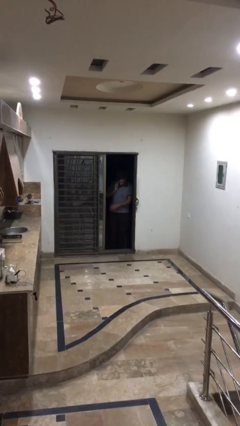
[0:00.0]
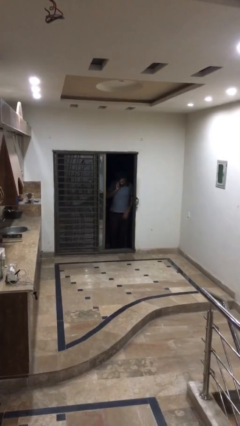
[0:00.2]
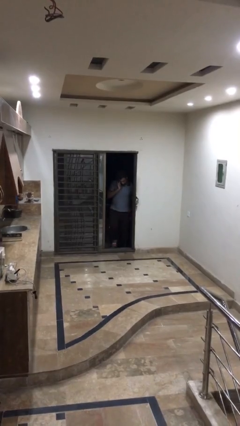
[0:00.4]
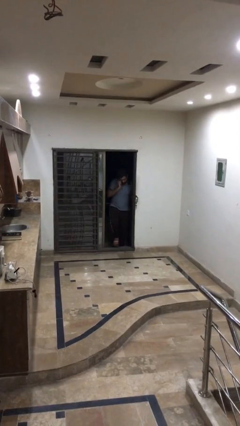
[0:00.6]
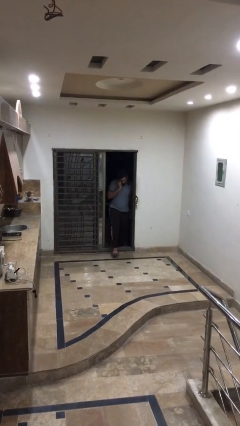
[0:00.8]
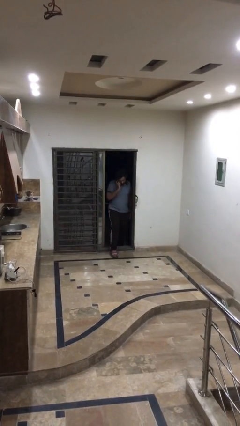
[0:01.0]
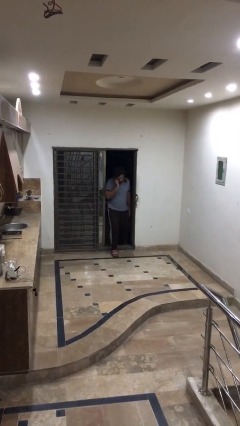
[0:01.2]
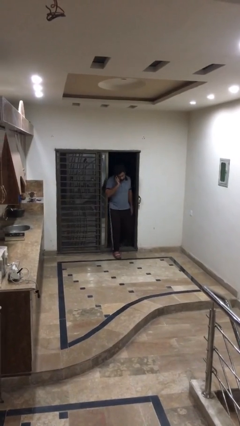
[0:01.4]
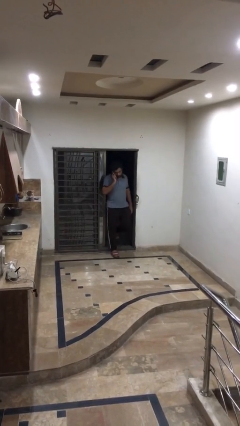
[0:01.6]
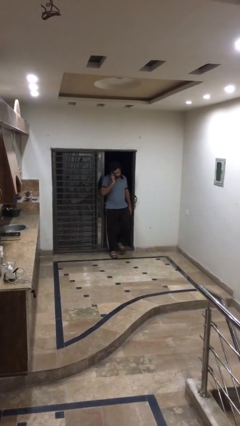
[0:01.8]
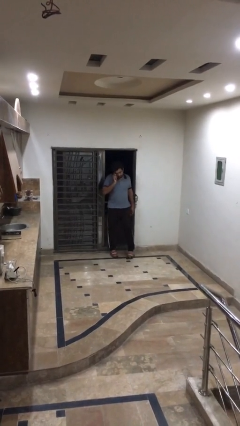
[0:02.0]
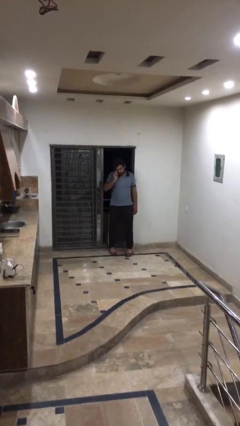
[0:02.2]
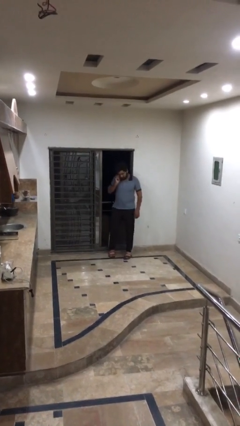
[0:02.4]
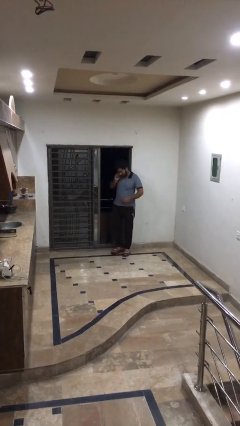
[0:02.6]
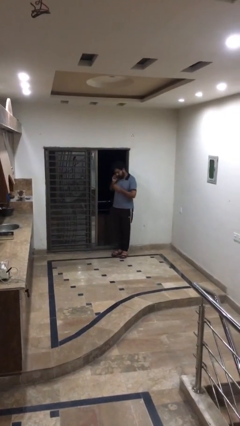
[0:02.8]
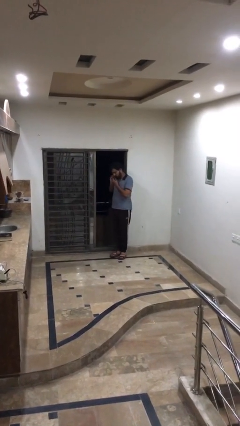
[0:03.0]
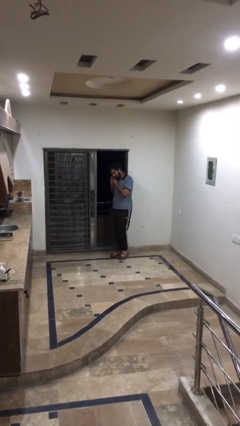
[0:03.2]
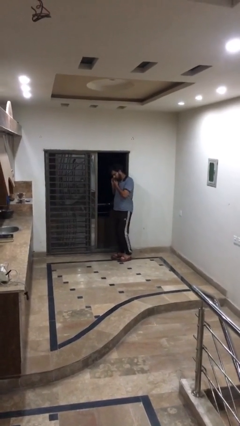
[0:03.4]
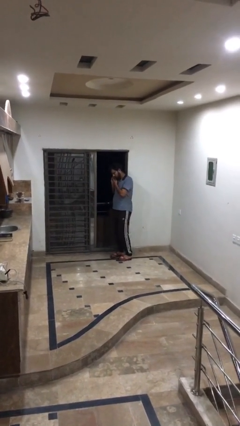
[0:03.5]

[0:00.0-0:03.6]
person enters scene through structure

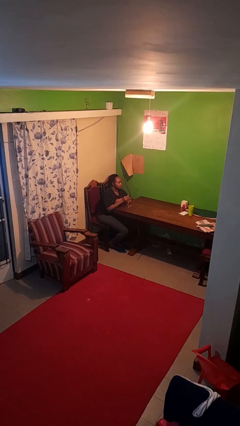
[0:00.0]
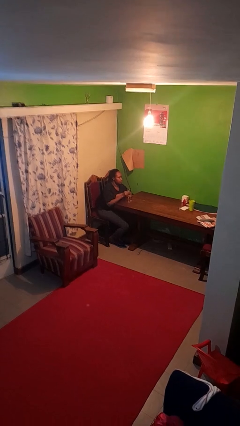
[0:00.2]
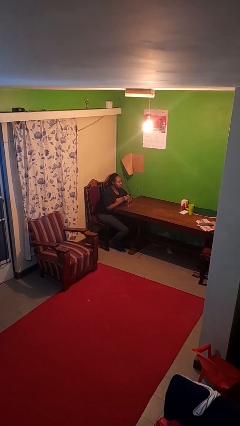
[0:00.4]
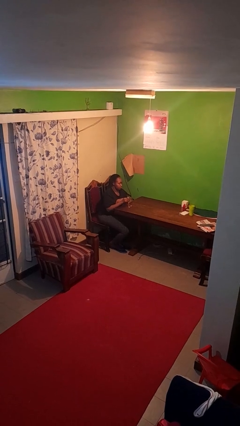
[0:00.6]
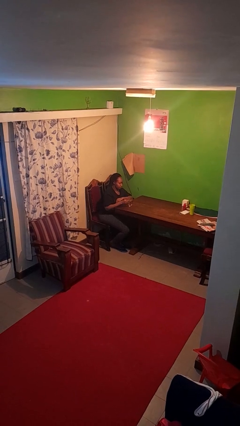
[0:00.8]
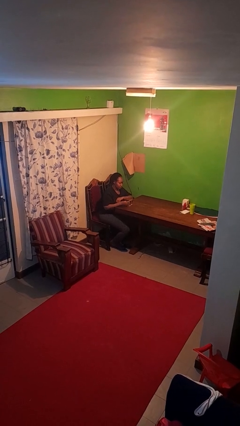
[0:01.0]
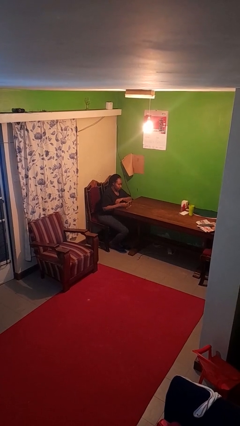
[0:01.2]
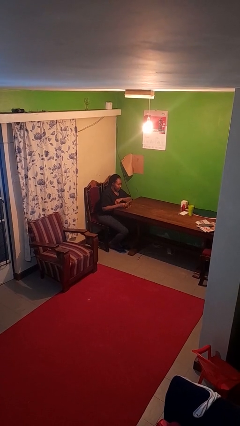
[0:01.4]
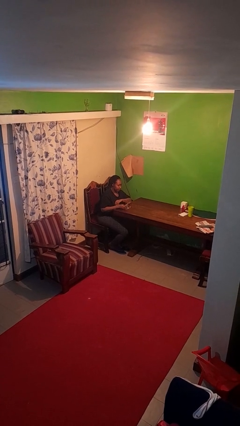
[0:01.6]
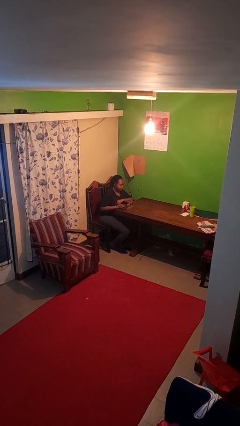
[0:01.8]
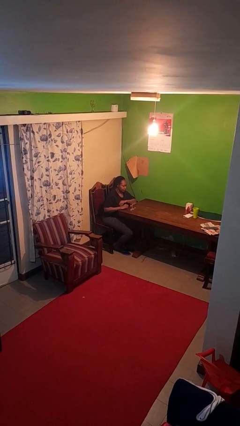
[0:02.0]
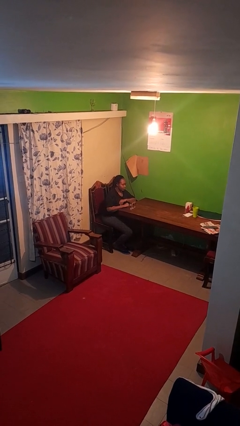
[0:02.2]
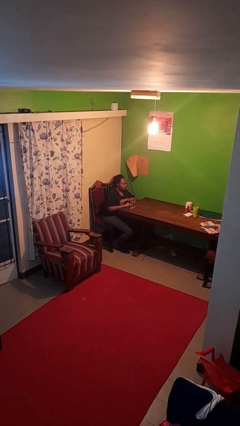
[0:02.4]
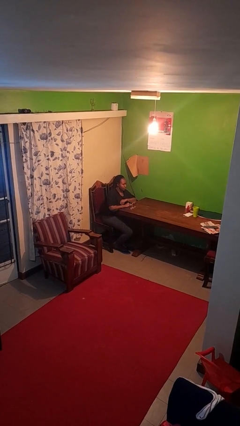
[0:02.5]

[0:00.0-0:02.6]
person puts down object on table

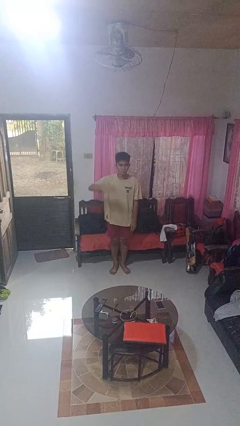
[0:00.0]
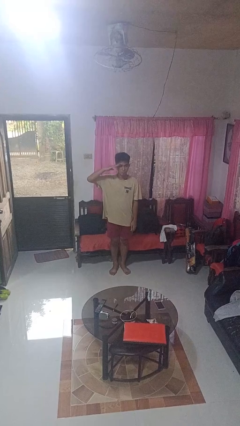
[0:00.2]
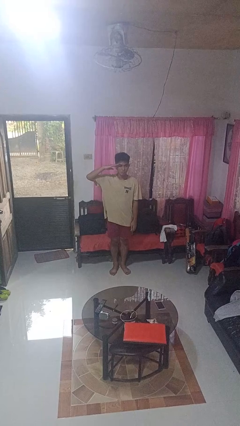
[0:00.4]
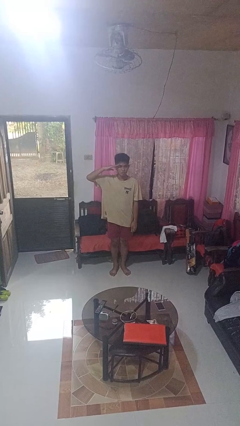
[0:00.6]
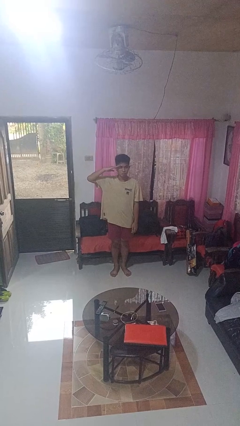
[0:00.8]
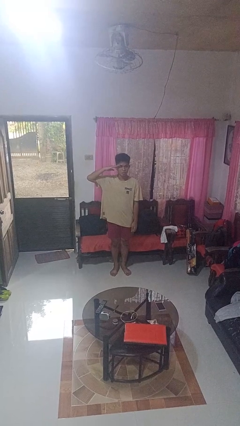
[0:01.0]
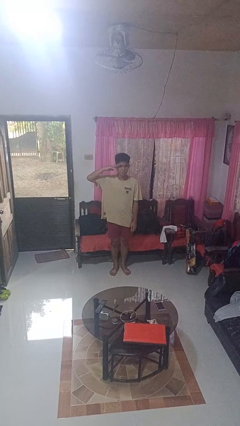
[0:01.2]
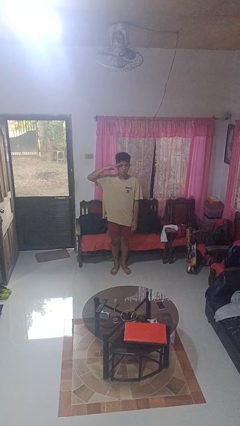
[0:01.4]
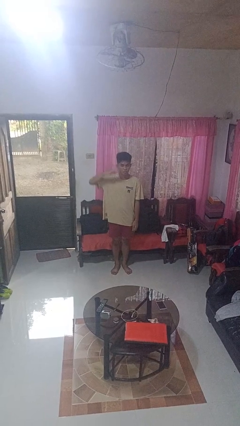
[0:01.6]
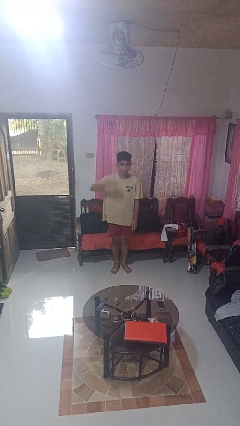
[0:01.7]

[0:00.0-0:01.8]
person salutes

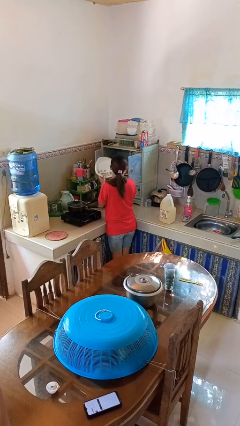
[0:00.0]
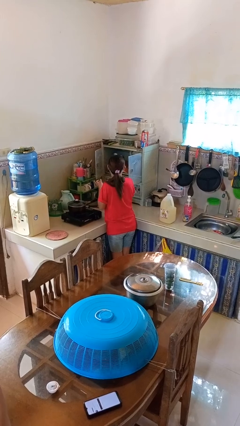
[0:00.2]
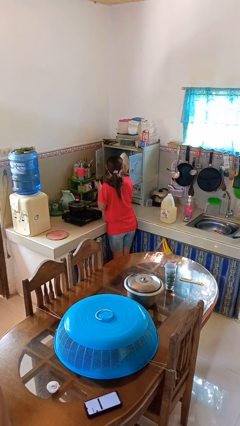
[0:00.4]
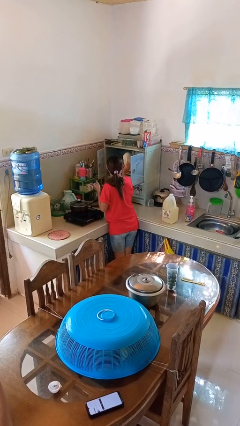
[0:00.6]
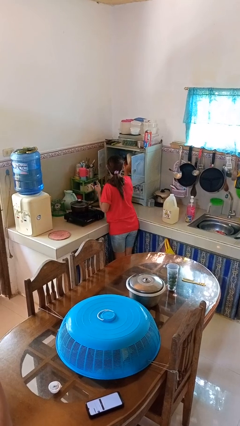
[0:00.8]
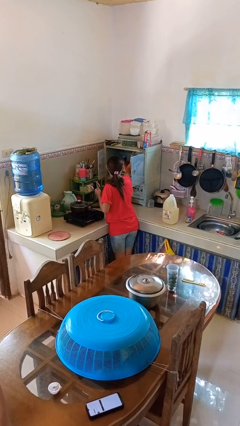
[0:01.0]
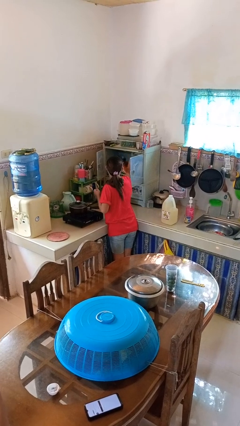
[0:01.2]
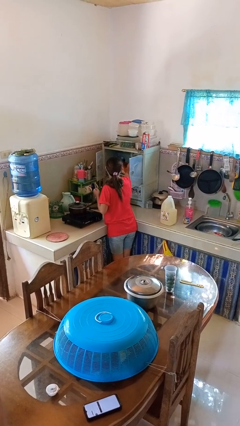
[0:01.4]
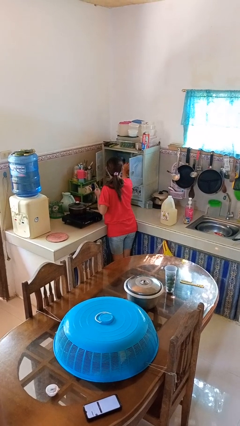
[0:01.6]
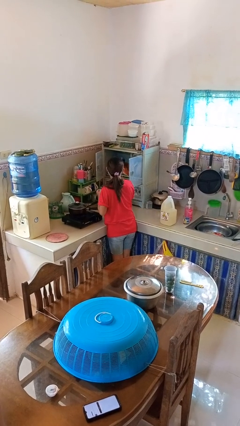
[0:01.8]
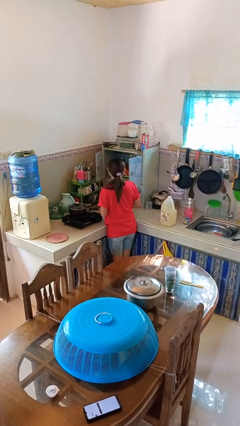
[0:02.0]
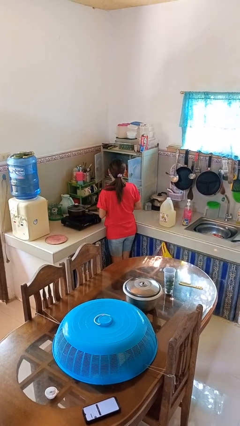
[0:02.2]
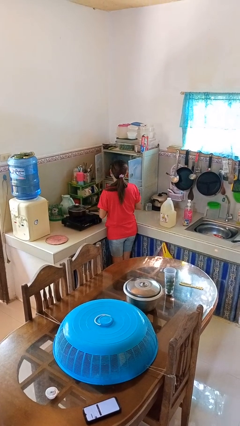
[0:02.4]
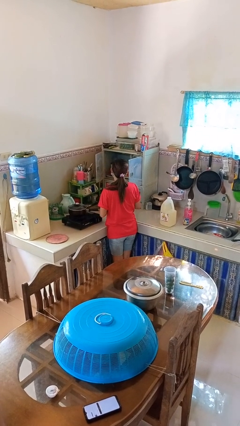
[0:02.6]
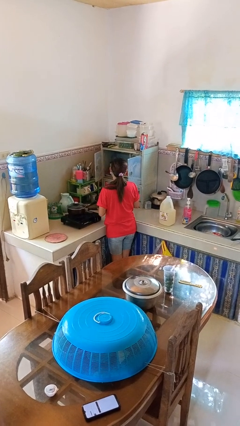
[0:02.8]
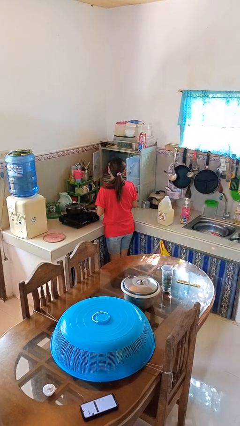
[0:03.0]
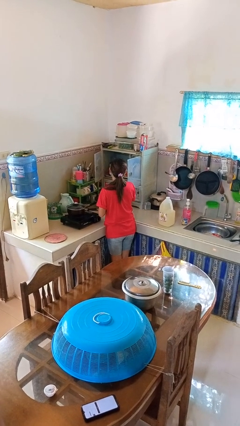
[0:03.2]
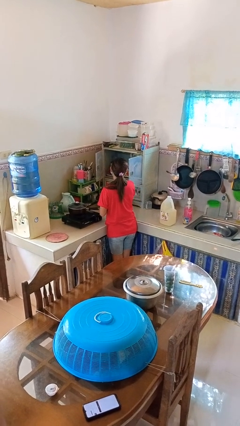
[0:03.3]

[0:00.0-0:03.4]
person puts object in cabinet

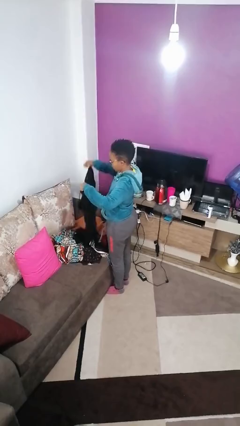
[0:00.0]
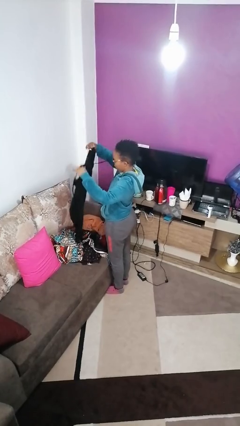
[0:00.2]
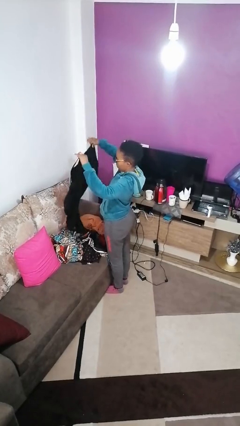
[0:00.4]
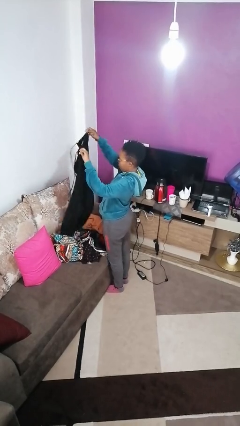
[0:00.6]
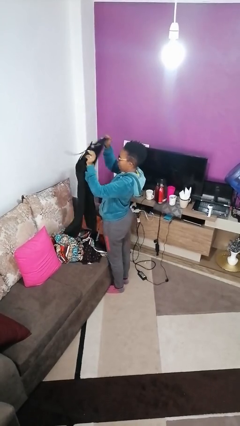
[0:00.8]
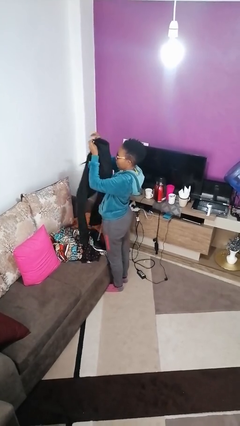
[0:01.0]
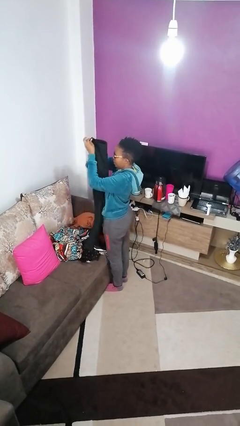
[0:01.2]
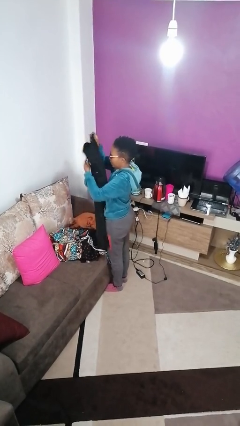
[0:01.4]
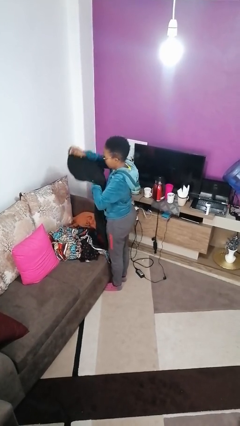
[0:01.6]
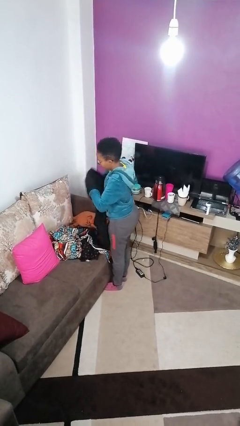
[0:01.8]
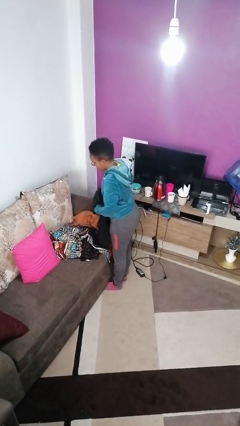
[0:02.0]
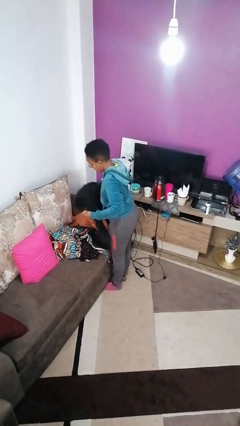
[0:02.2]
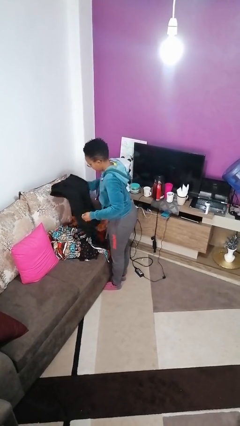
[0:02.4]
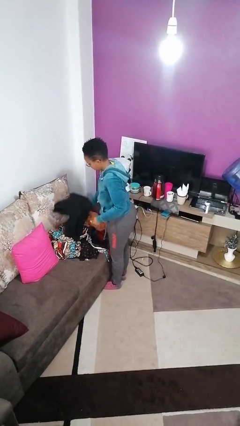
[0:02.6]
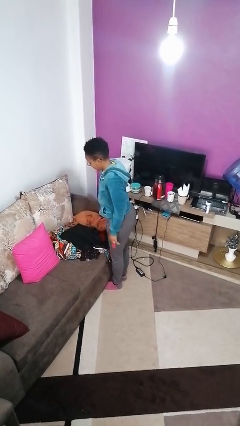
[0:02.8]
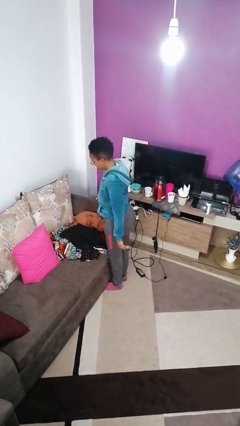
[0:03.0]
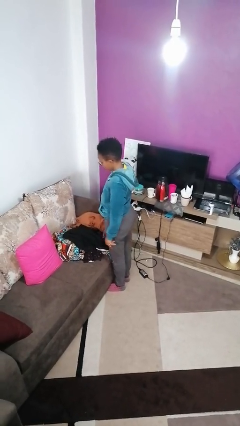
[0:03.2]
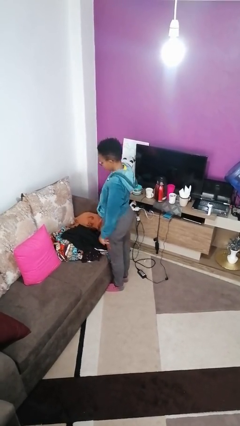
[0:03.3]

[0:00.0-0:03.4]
person folds pants

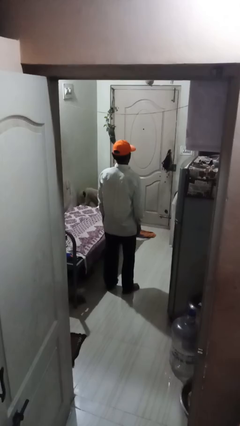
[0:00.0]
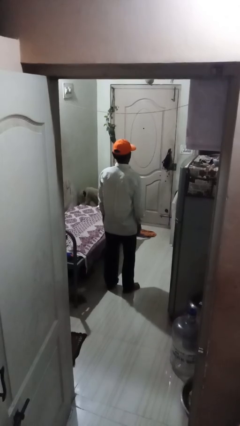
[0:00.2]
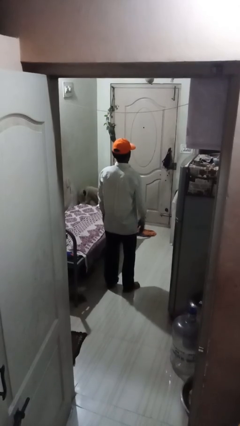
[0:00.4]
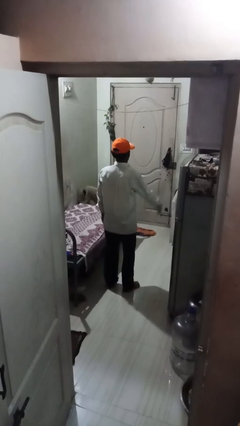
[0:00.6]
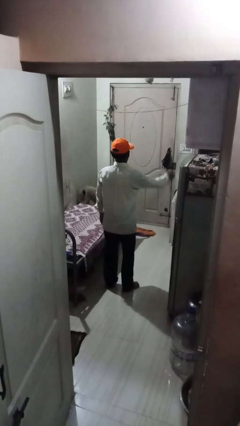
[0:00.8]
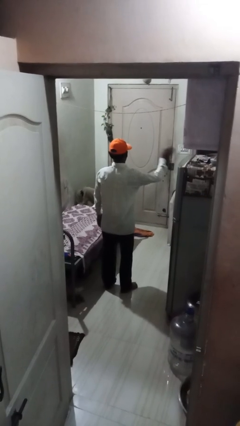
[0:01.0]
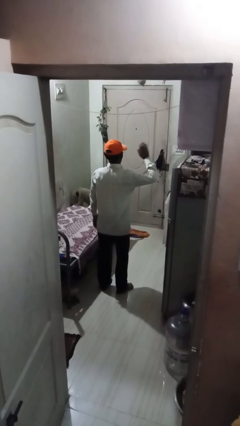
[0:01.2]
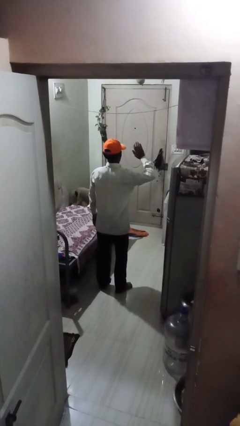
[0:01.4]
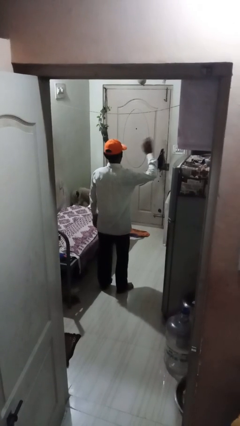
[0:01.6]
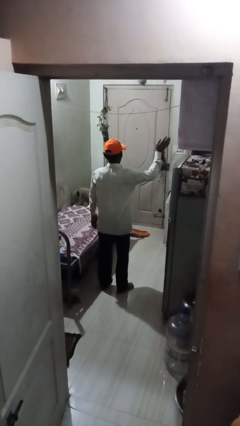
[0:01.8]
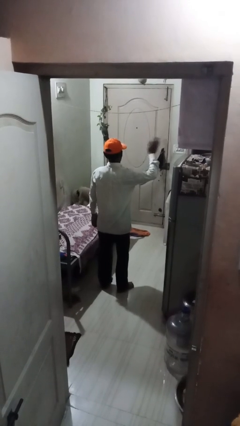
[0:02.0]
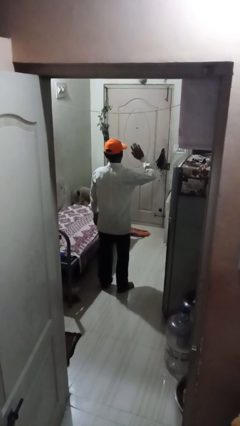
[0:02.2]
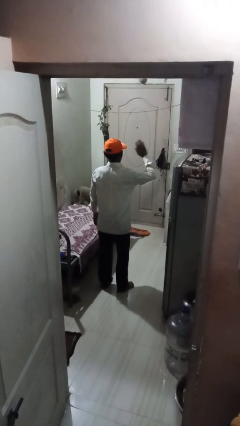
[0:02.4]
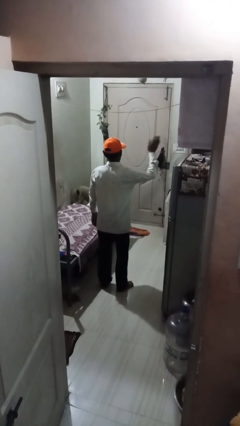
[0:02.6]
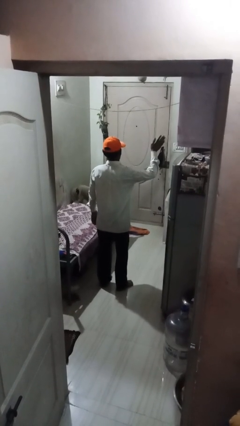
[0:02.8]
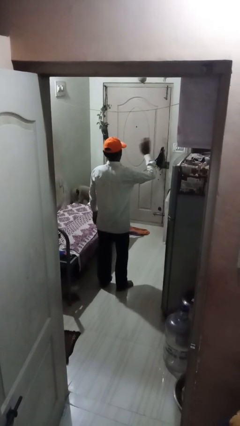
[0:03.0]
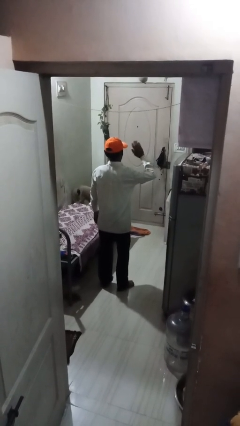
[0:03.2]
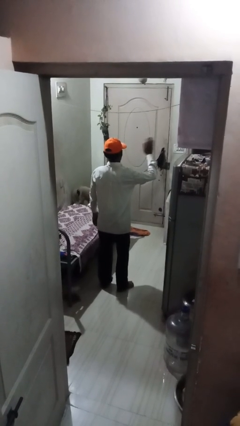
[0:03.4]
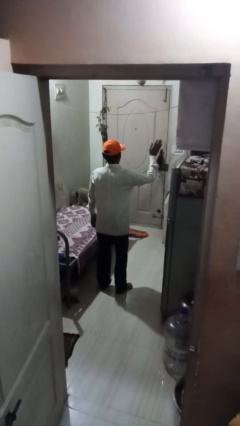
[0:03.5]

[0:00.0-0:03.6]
person waves at person
